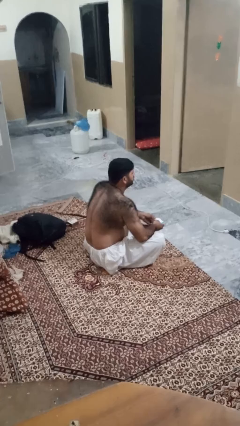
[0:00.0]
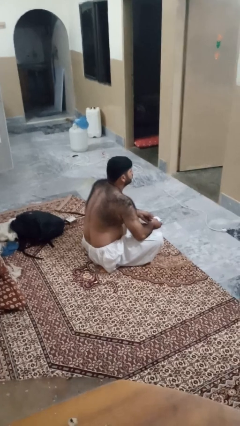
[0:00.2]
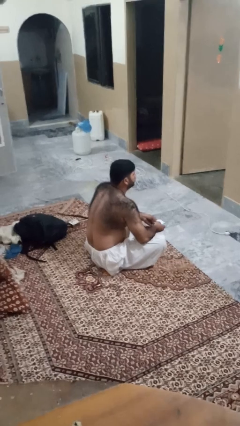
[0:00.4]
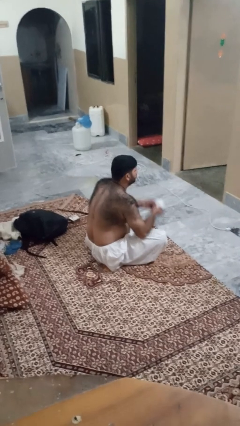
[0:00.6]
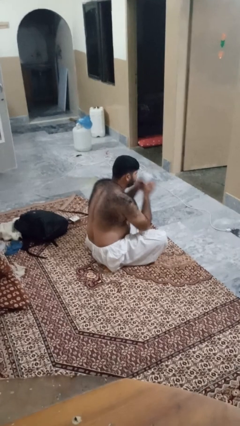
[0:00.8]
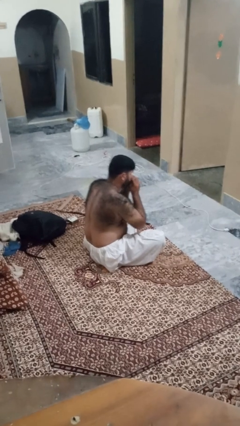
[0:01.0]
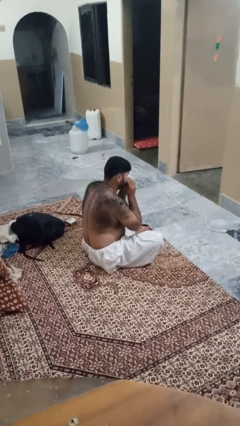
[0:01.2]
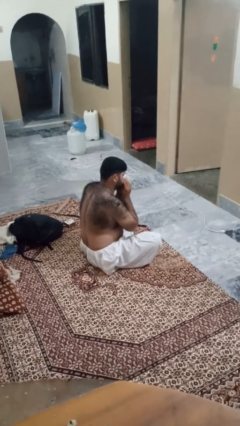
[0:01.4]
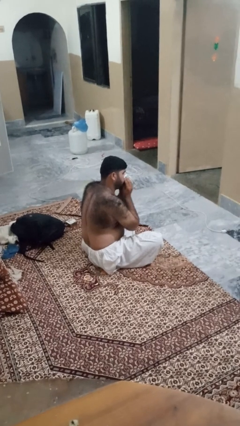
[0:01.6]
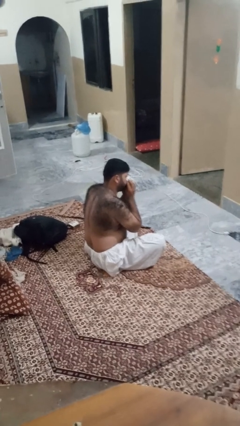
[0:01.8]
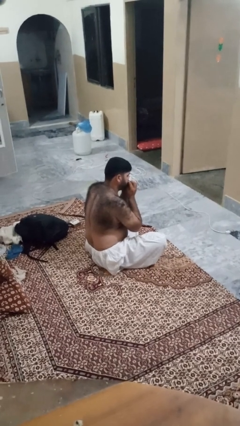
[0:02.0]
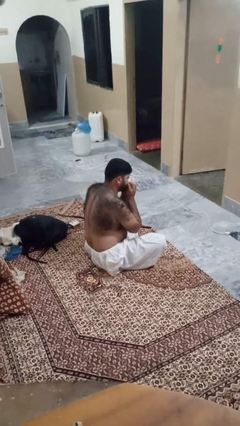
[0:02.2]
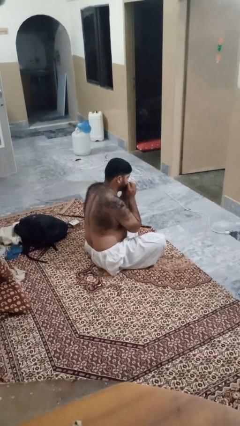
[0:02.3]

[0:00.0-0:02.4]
person blows nose

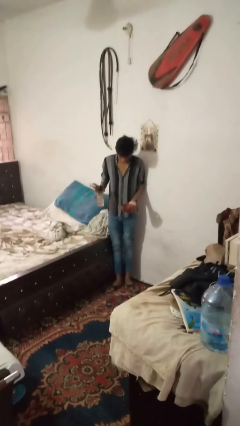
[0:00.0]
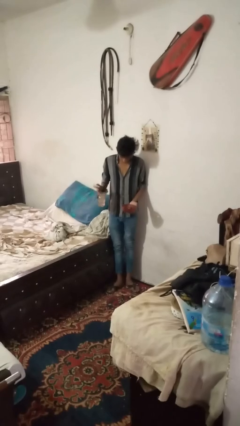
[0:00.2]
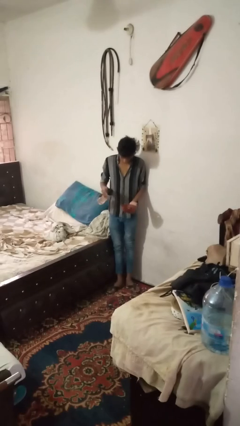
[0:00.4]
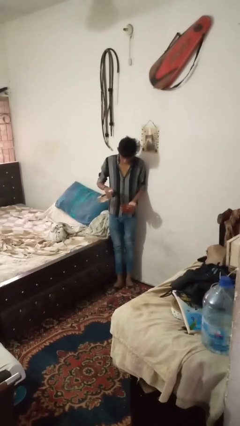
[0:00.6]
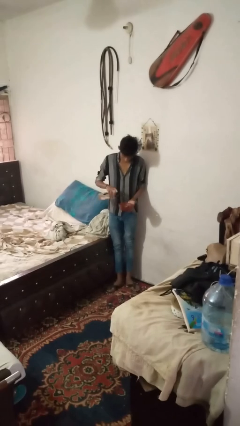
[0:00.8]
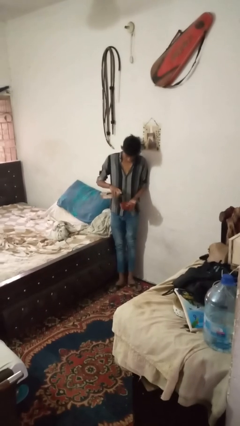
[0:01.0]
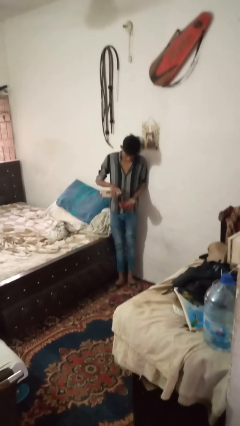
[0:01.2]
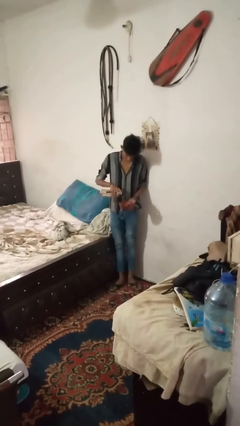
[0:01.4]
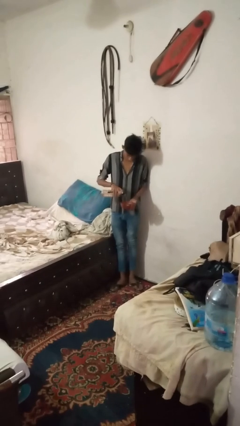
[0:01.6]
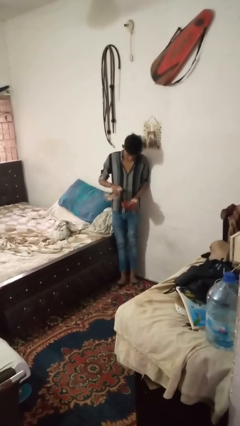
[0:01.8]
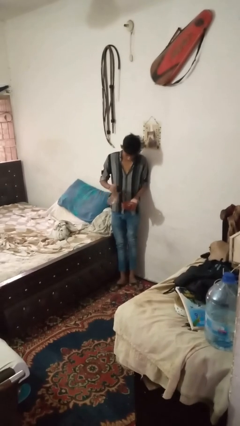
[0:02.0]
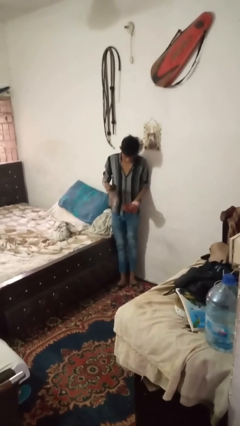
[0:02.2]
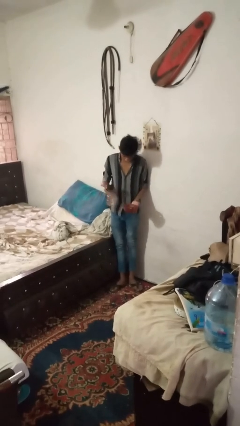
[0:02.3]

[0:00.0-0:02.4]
person pours liquid into cup

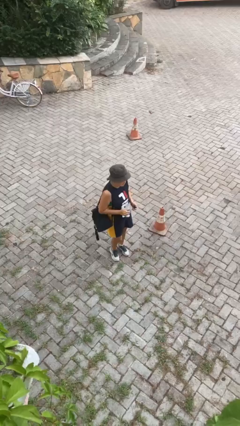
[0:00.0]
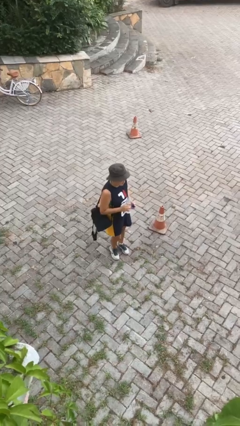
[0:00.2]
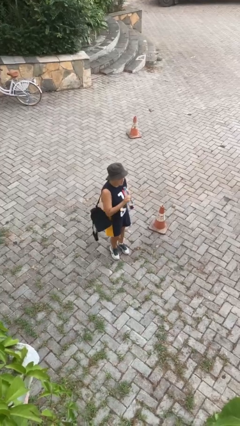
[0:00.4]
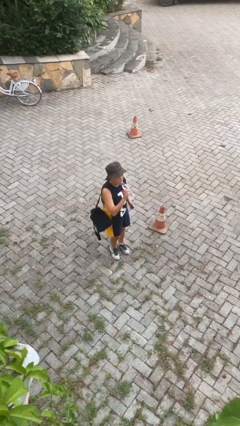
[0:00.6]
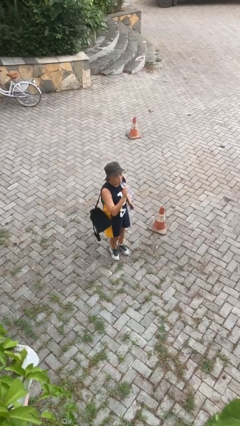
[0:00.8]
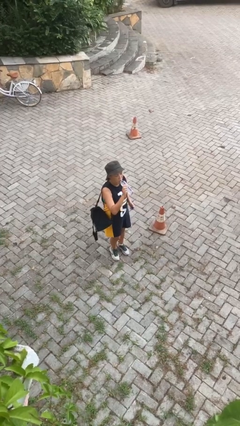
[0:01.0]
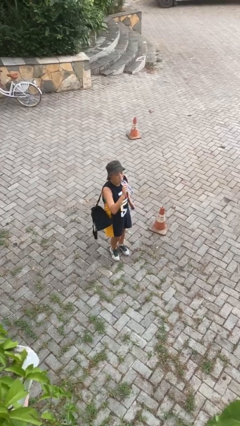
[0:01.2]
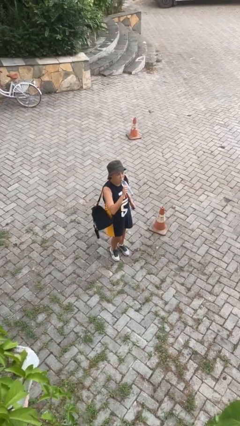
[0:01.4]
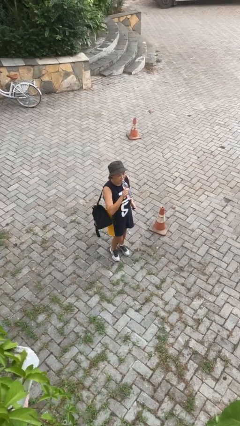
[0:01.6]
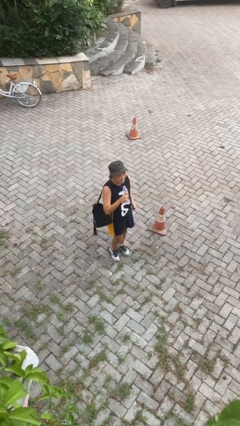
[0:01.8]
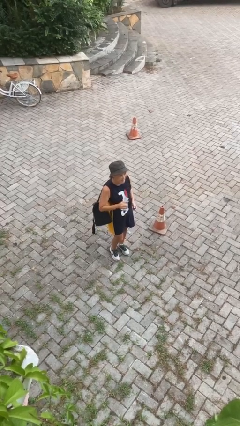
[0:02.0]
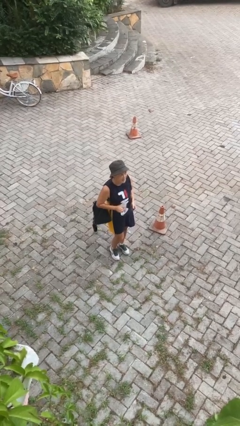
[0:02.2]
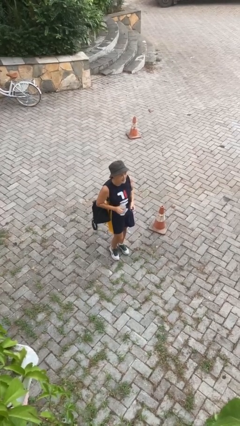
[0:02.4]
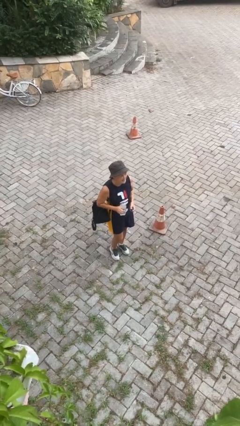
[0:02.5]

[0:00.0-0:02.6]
person drinks from bottle

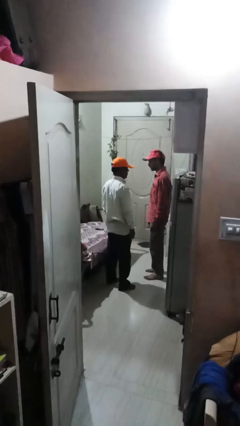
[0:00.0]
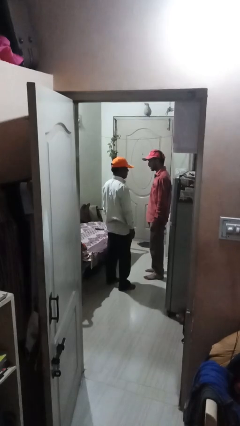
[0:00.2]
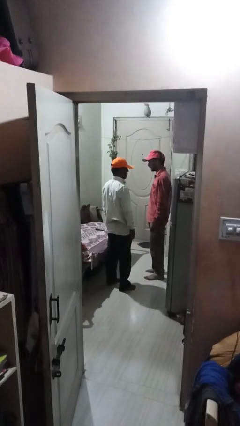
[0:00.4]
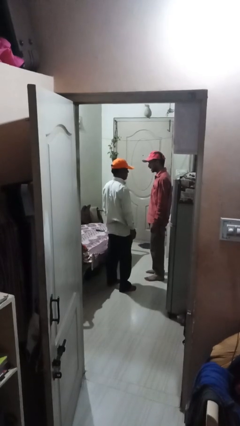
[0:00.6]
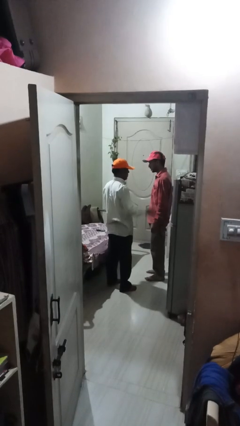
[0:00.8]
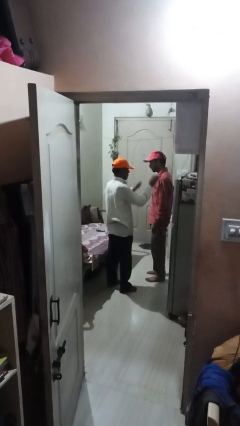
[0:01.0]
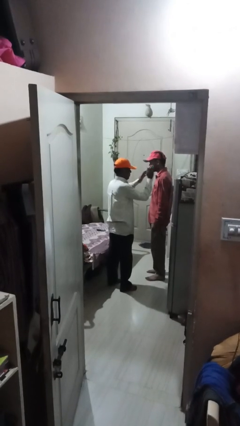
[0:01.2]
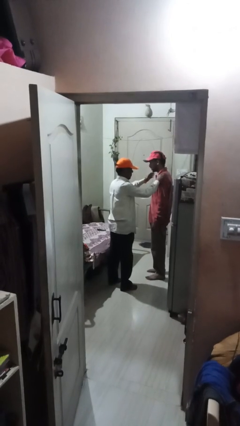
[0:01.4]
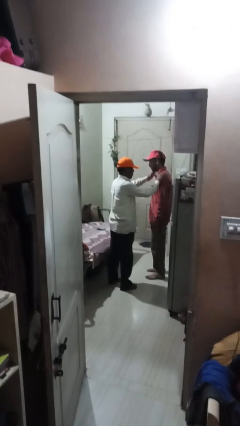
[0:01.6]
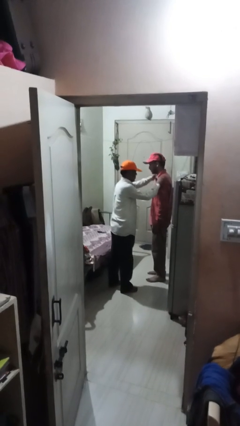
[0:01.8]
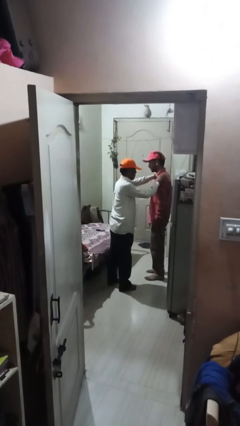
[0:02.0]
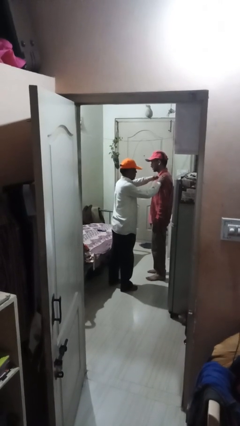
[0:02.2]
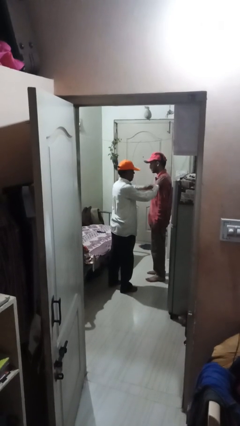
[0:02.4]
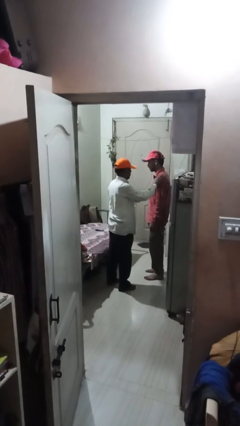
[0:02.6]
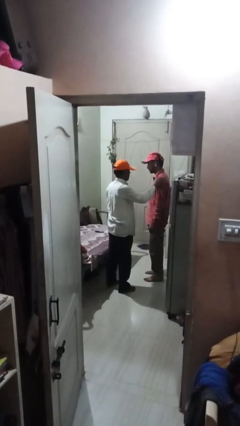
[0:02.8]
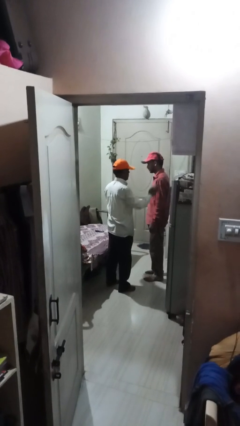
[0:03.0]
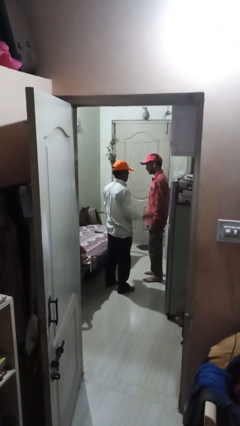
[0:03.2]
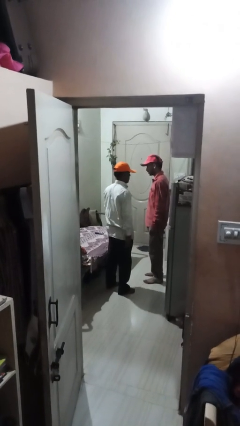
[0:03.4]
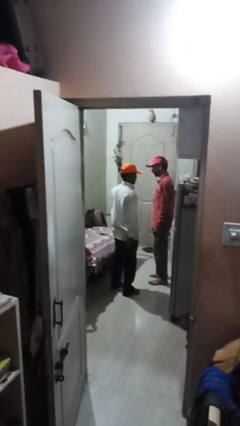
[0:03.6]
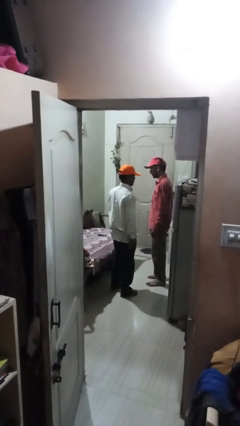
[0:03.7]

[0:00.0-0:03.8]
person pounds shoulders of person

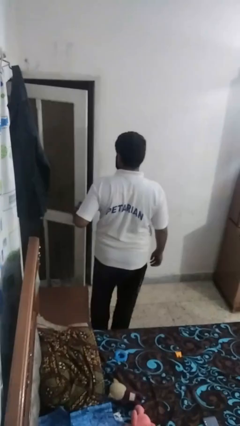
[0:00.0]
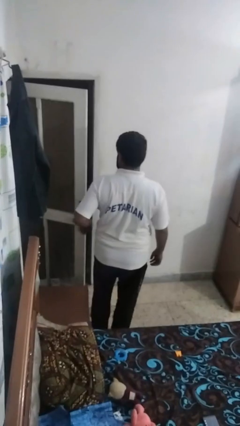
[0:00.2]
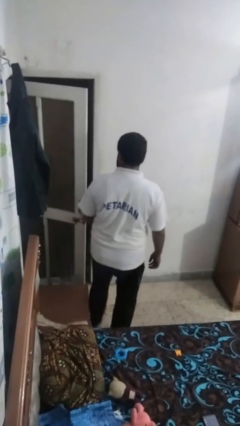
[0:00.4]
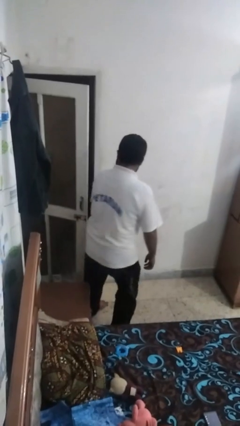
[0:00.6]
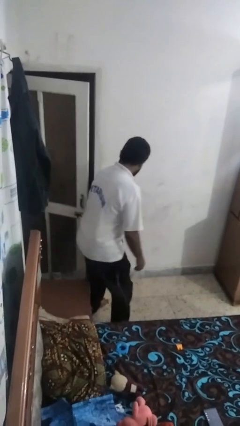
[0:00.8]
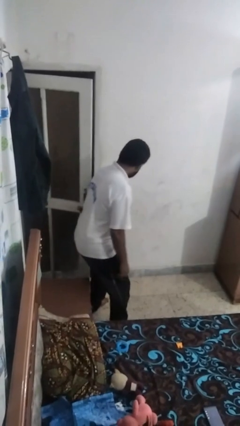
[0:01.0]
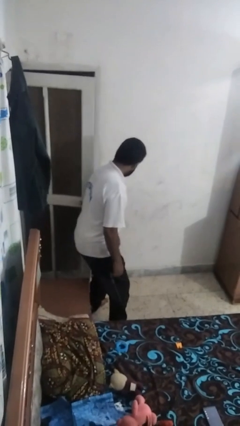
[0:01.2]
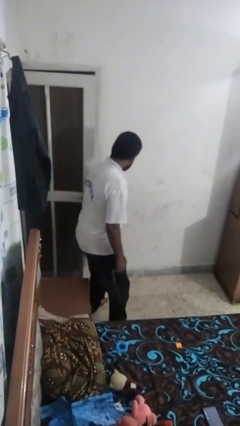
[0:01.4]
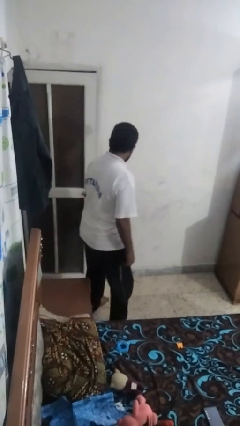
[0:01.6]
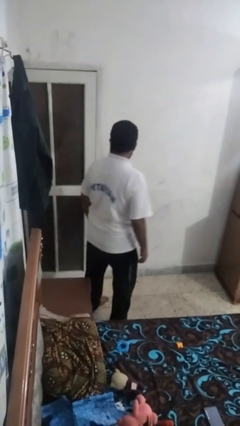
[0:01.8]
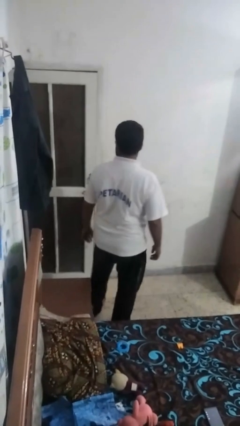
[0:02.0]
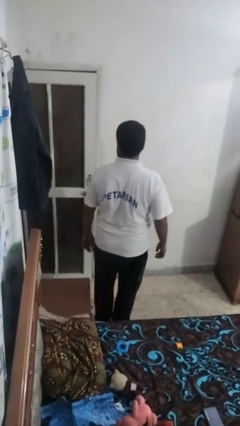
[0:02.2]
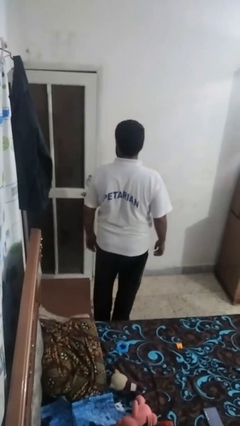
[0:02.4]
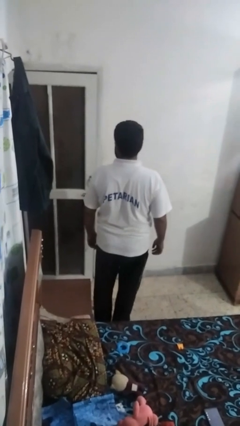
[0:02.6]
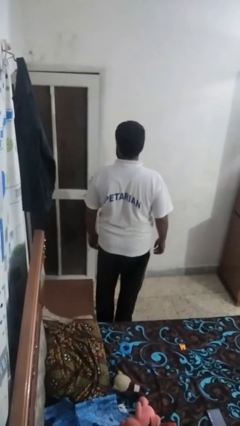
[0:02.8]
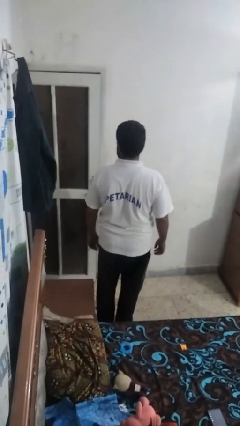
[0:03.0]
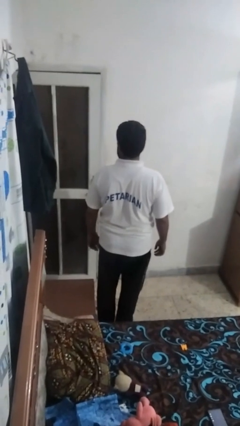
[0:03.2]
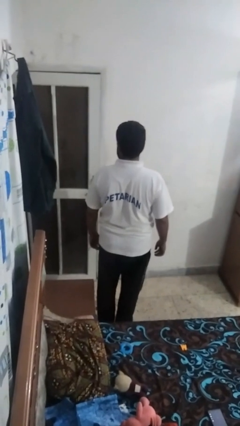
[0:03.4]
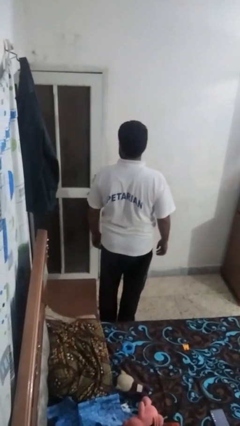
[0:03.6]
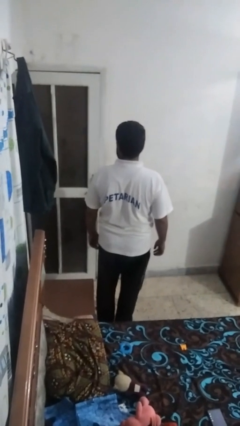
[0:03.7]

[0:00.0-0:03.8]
person closes door with hip

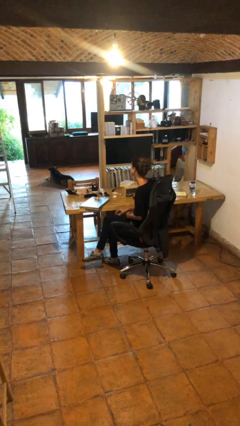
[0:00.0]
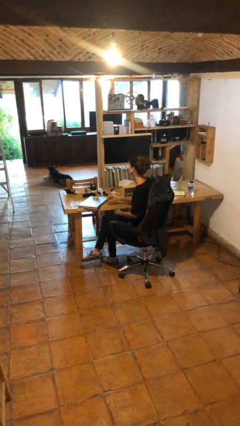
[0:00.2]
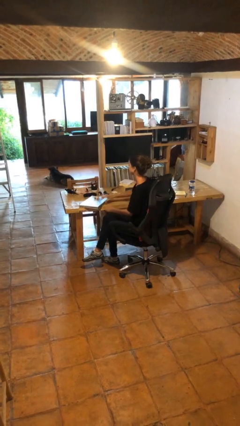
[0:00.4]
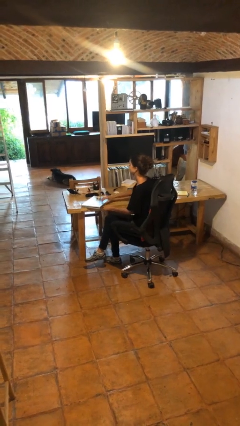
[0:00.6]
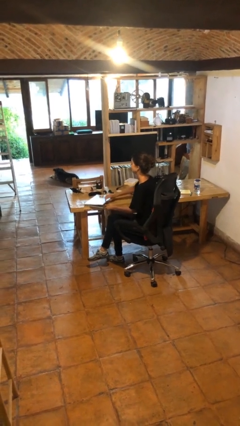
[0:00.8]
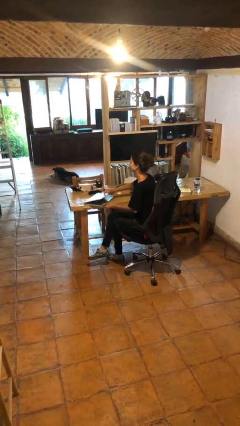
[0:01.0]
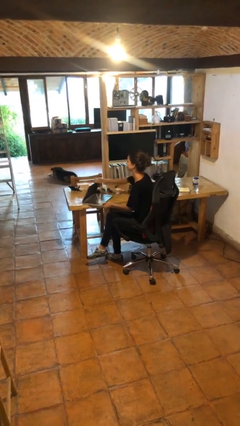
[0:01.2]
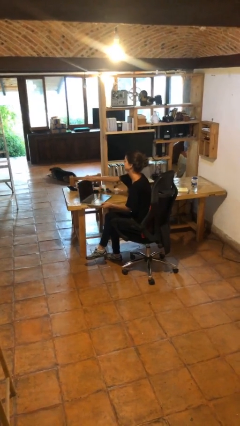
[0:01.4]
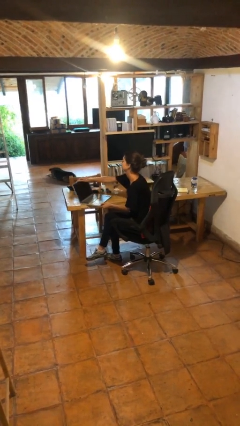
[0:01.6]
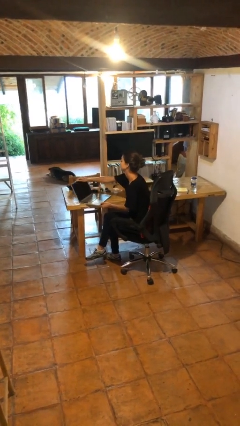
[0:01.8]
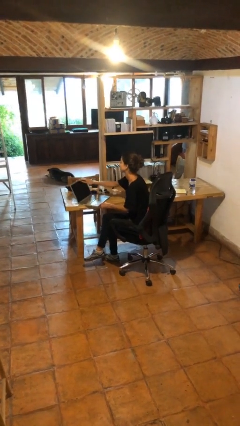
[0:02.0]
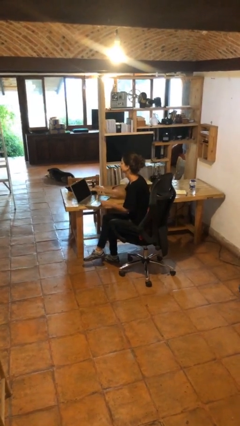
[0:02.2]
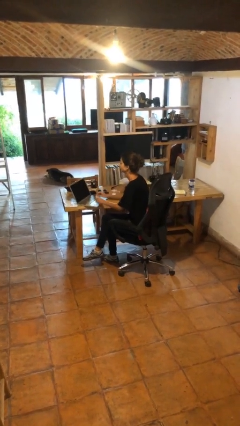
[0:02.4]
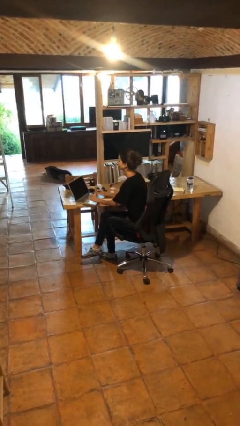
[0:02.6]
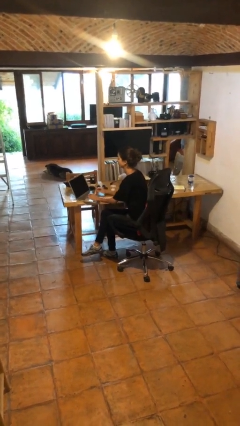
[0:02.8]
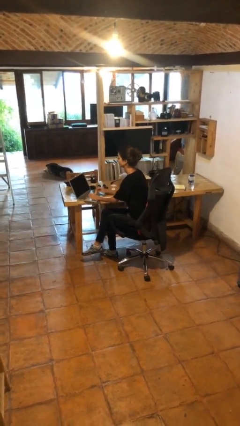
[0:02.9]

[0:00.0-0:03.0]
person opens laptop
